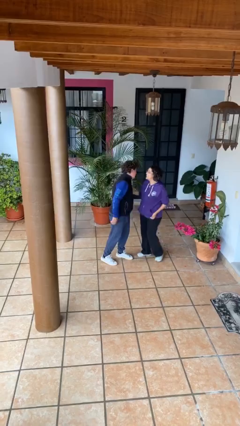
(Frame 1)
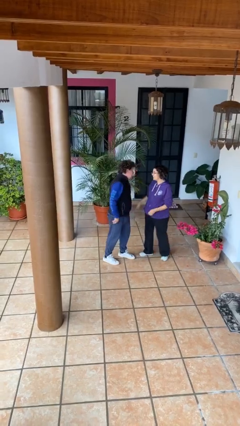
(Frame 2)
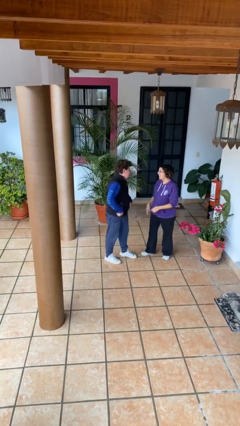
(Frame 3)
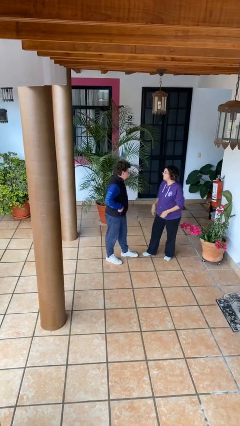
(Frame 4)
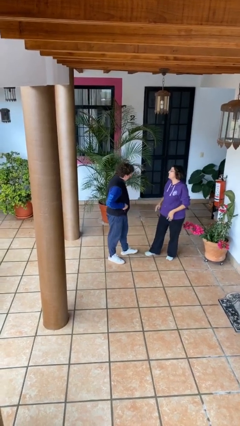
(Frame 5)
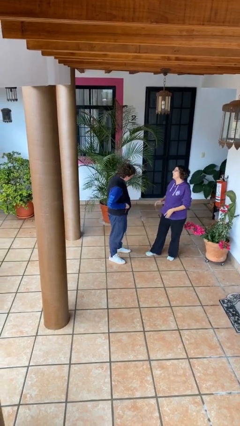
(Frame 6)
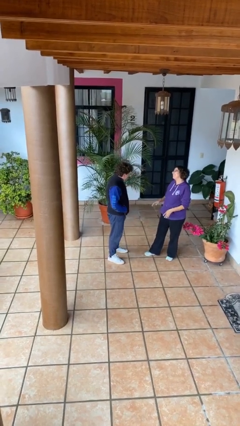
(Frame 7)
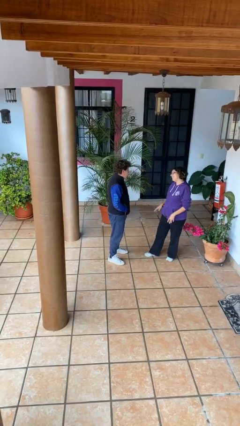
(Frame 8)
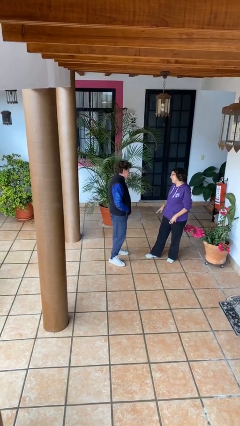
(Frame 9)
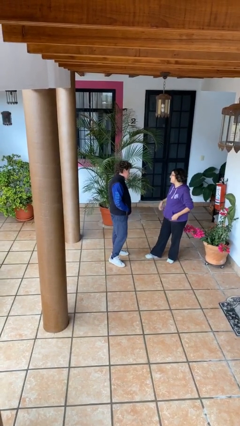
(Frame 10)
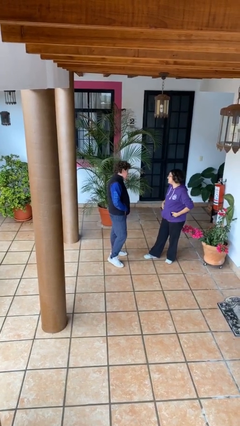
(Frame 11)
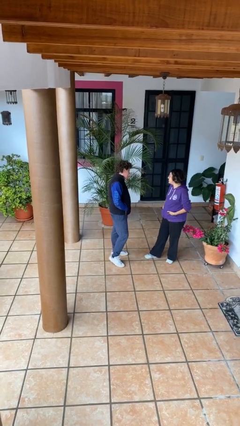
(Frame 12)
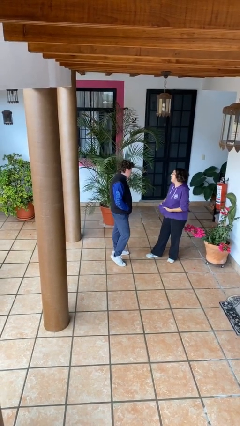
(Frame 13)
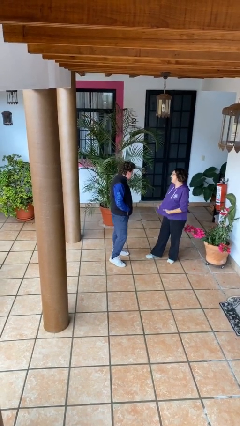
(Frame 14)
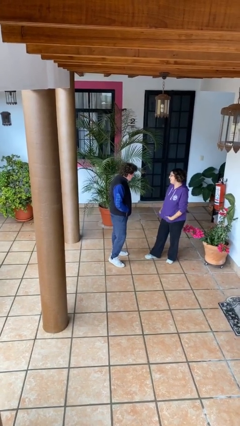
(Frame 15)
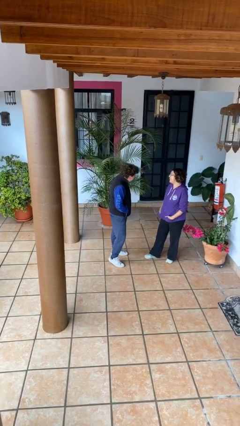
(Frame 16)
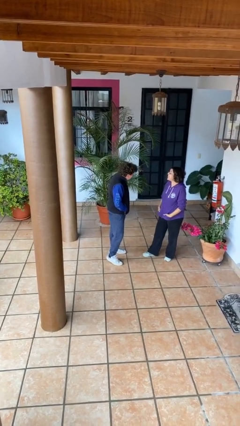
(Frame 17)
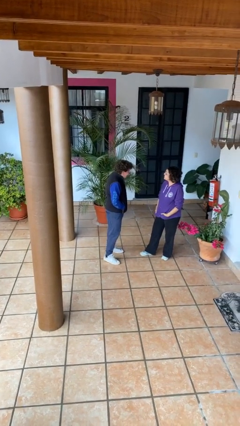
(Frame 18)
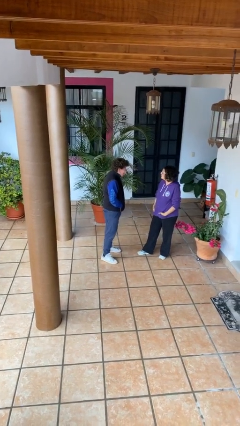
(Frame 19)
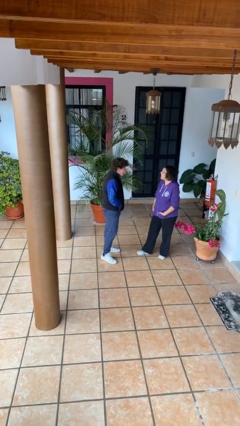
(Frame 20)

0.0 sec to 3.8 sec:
person talks to person

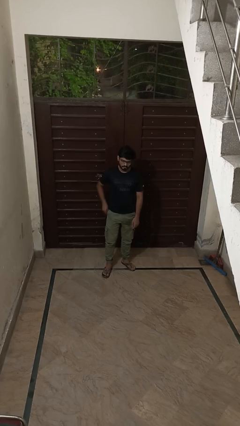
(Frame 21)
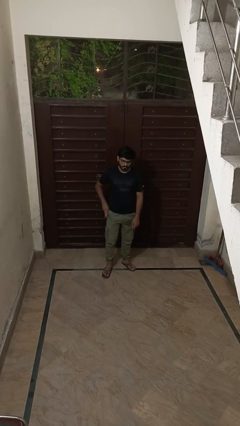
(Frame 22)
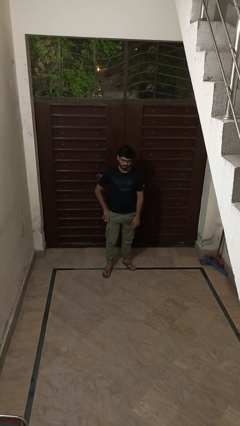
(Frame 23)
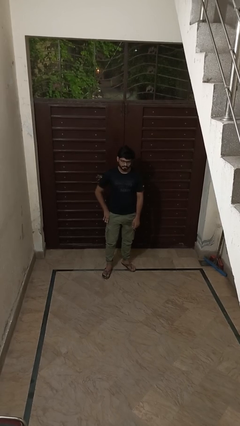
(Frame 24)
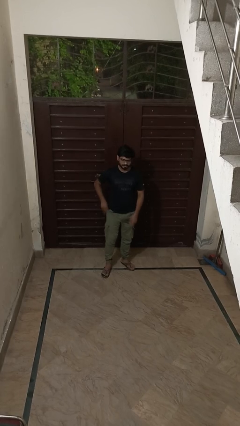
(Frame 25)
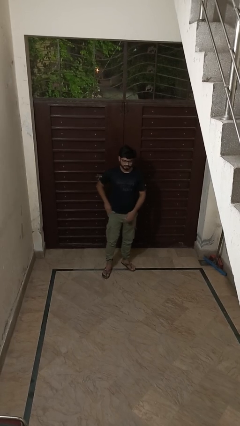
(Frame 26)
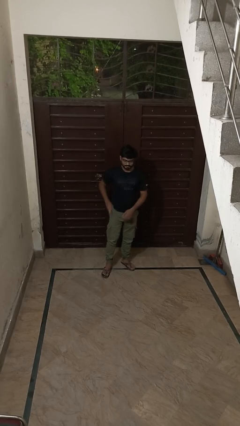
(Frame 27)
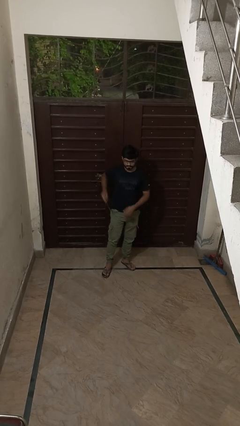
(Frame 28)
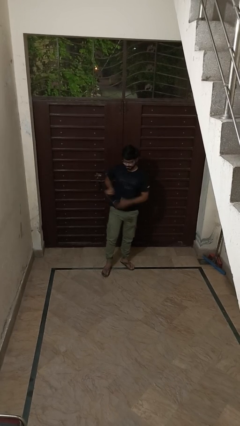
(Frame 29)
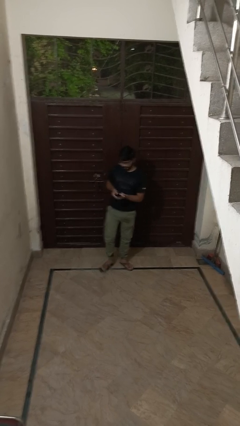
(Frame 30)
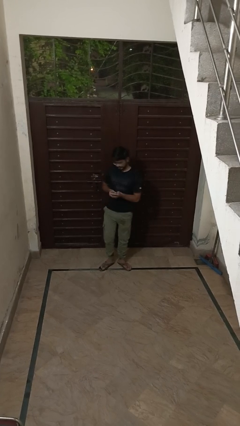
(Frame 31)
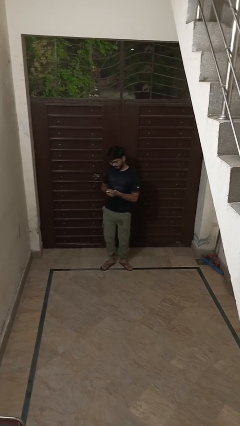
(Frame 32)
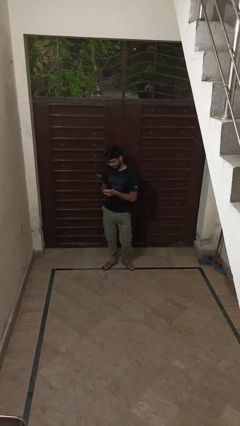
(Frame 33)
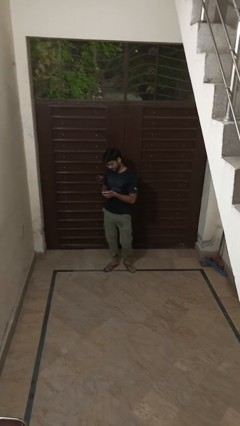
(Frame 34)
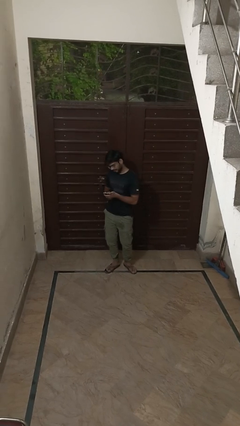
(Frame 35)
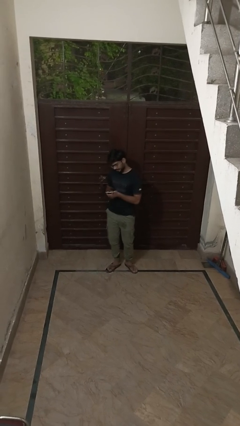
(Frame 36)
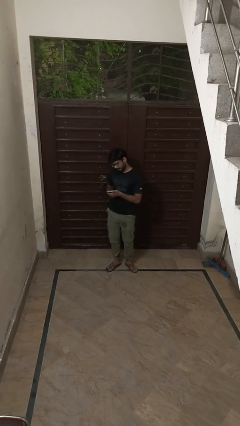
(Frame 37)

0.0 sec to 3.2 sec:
person takes phone from pocket

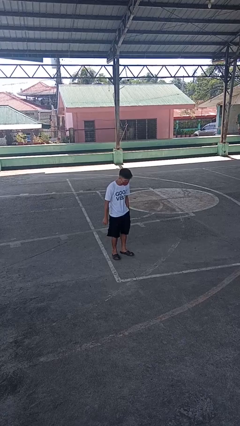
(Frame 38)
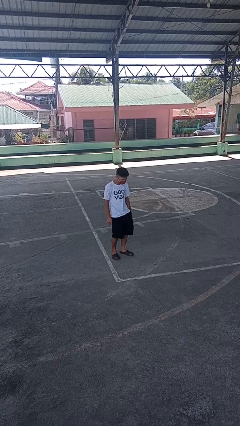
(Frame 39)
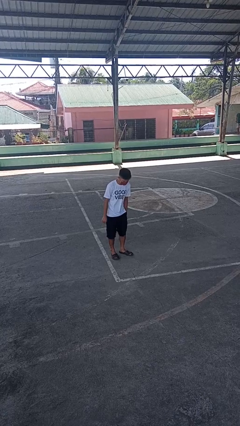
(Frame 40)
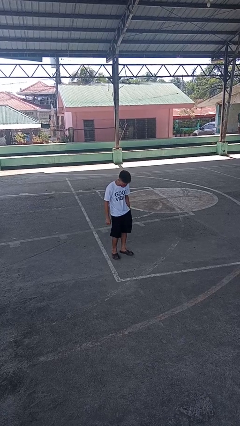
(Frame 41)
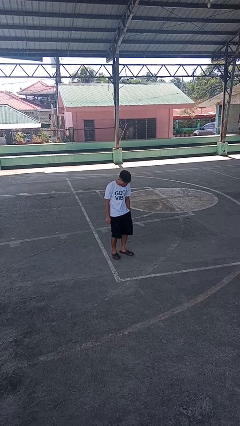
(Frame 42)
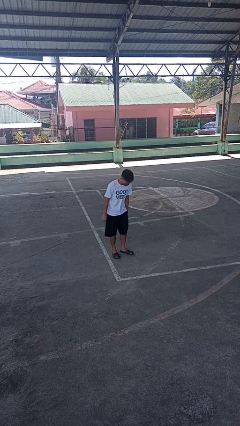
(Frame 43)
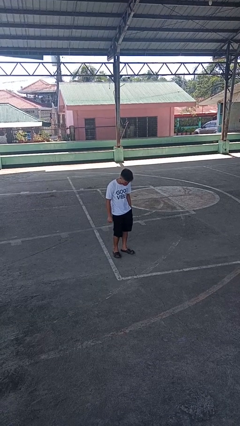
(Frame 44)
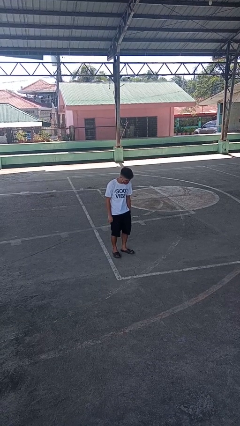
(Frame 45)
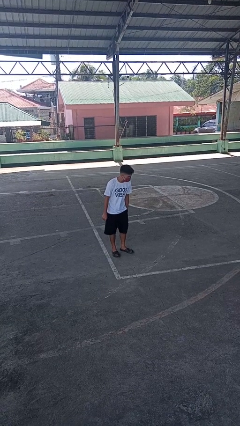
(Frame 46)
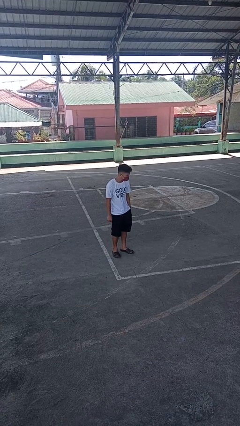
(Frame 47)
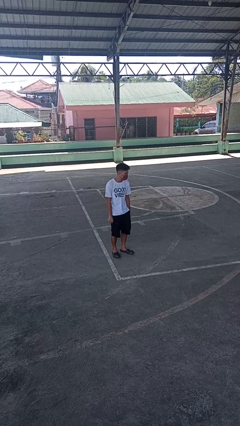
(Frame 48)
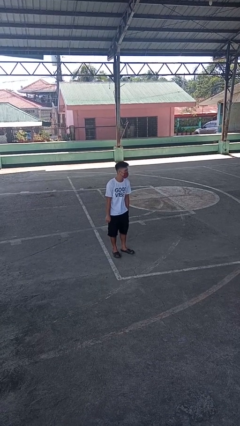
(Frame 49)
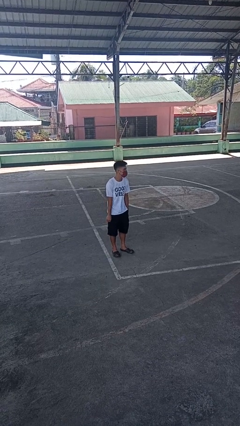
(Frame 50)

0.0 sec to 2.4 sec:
person wiggles hips

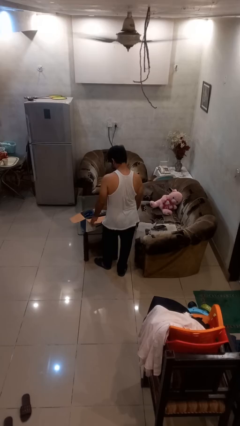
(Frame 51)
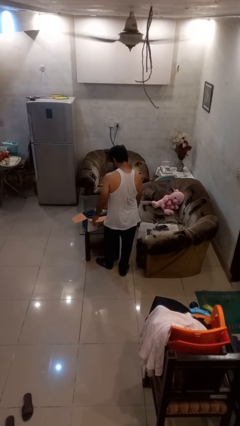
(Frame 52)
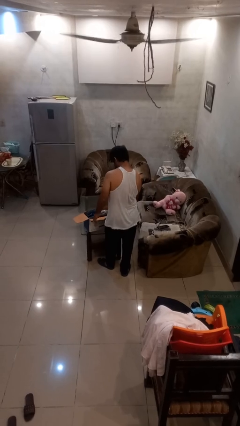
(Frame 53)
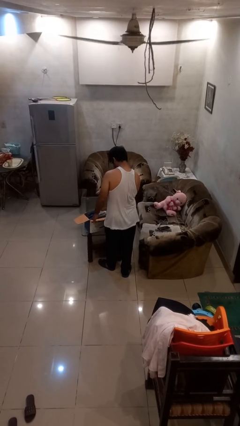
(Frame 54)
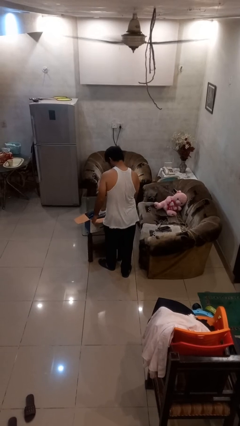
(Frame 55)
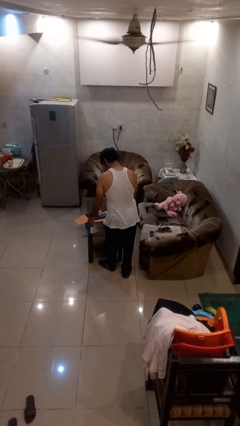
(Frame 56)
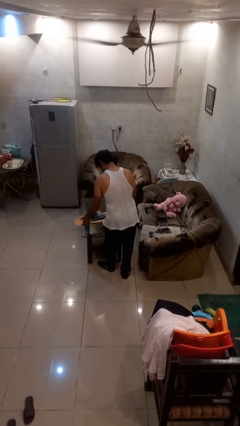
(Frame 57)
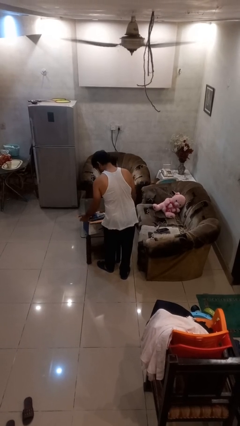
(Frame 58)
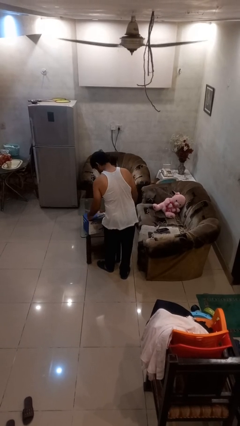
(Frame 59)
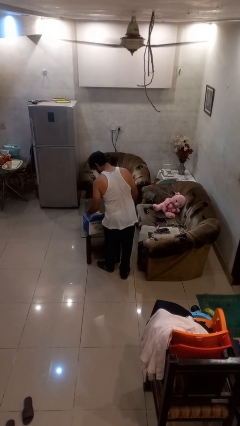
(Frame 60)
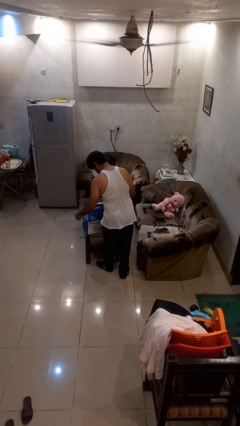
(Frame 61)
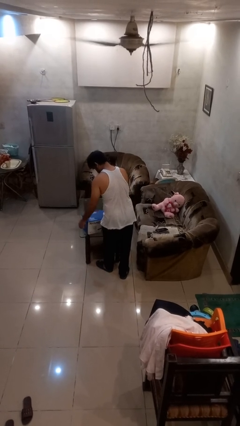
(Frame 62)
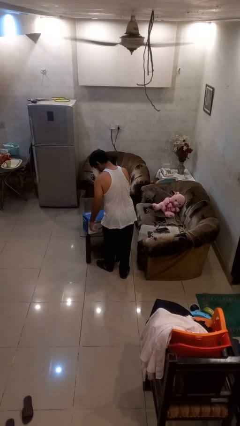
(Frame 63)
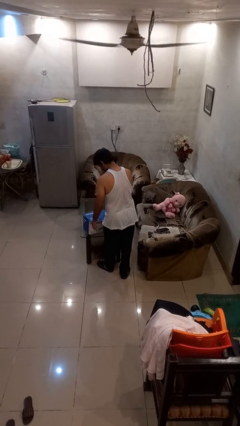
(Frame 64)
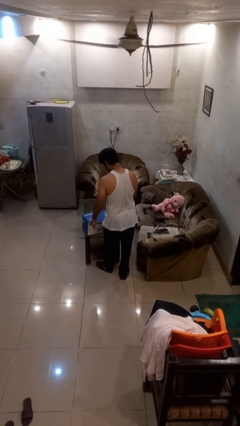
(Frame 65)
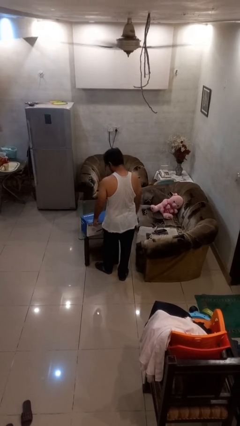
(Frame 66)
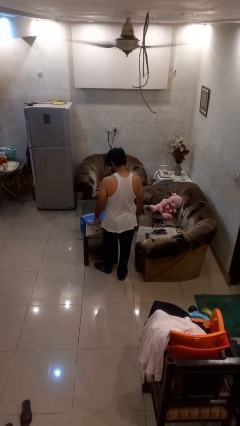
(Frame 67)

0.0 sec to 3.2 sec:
person closes box

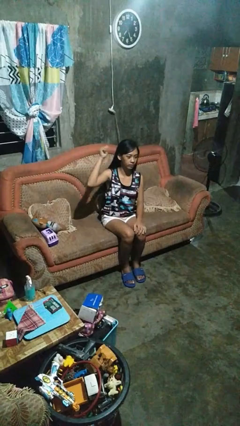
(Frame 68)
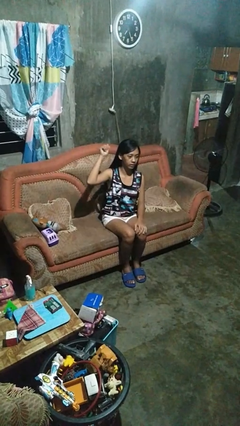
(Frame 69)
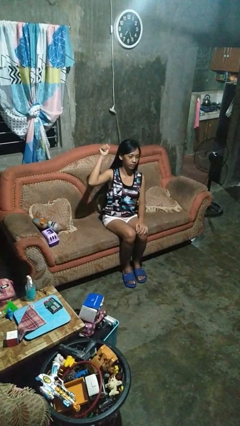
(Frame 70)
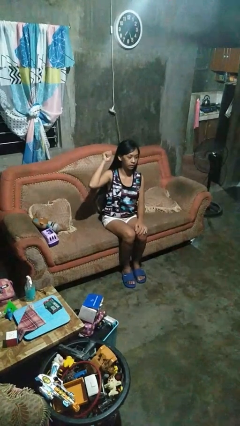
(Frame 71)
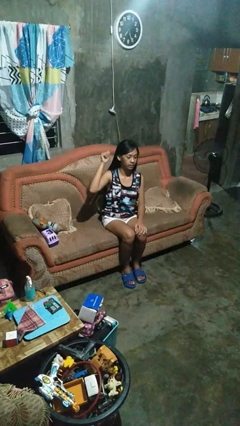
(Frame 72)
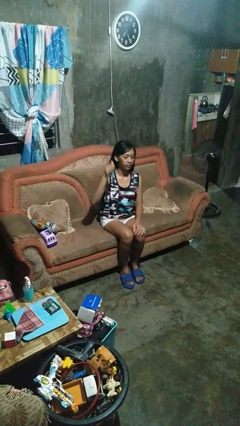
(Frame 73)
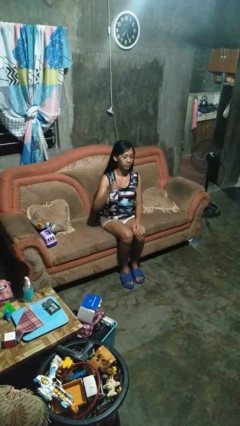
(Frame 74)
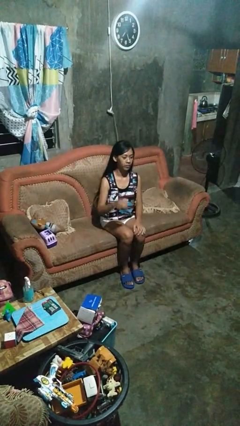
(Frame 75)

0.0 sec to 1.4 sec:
person gestures behind me

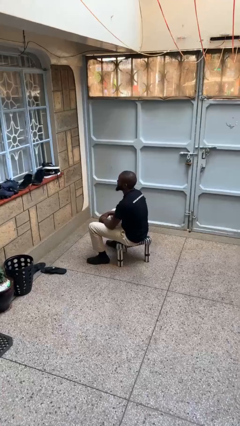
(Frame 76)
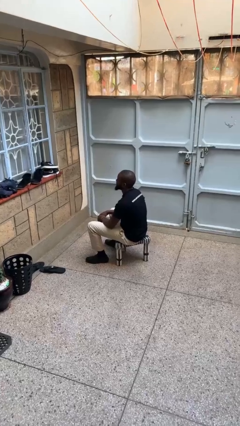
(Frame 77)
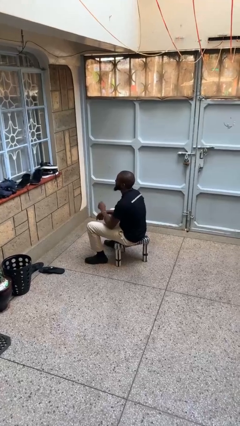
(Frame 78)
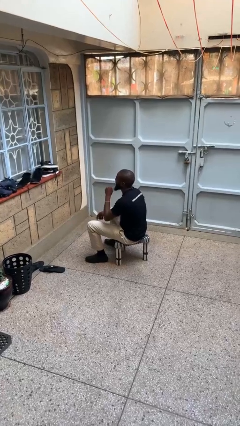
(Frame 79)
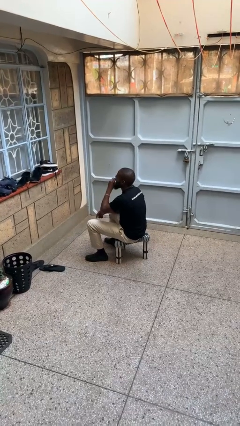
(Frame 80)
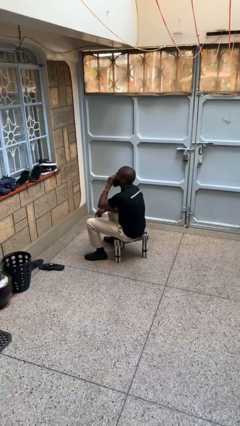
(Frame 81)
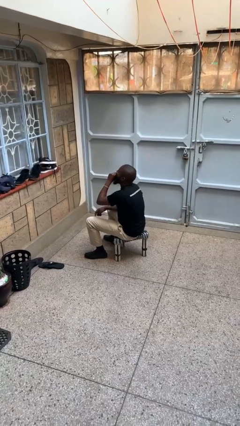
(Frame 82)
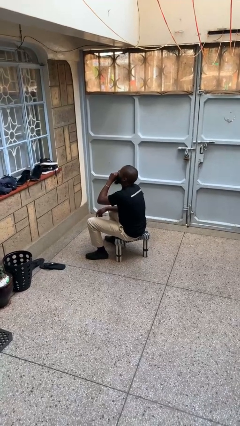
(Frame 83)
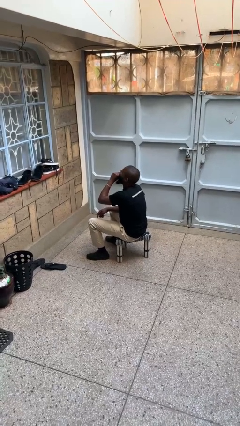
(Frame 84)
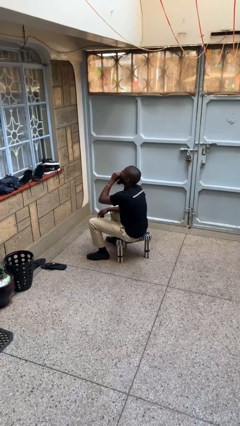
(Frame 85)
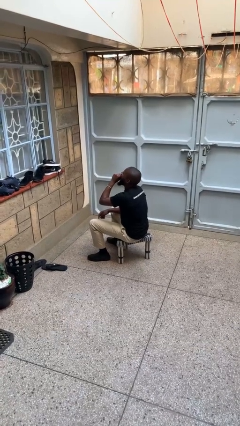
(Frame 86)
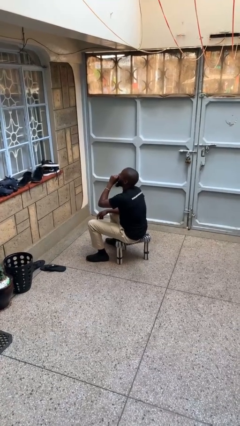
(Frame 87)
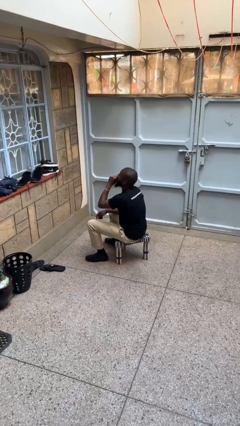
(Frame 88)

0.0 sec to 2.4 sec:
person yawns

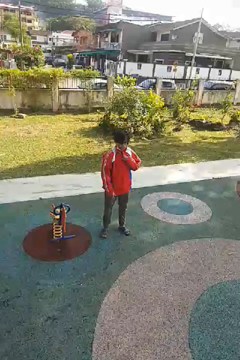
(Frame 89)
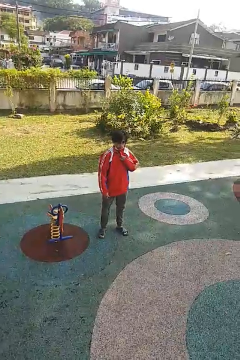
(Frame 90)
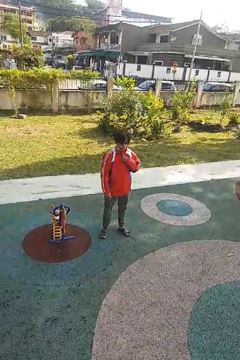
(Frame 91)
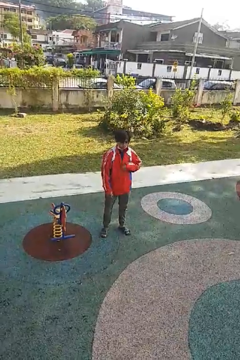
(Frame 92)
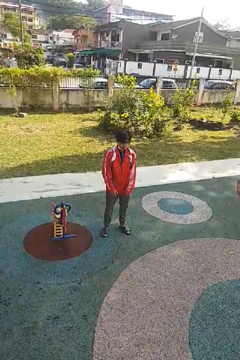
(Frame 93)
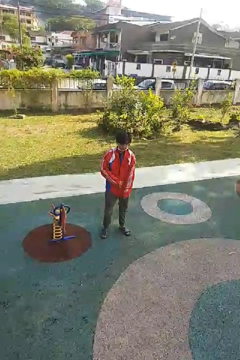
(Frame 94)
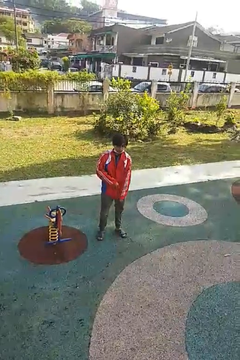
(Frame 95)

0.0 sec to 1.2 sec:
person unzips jacket
